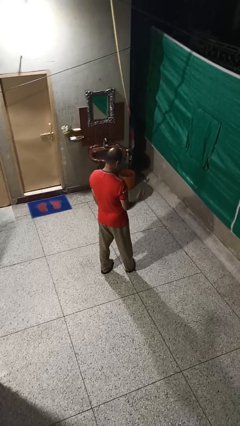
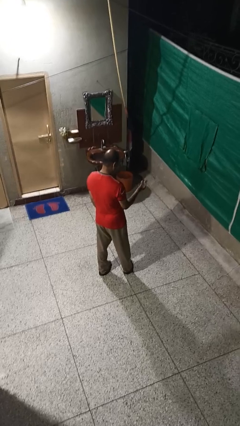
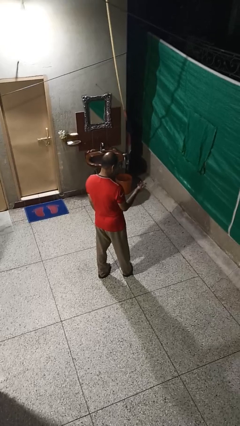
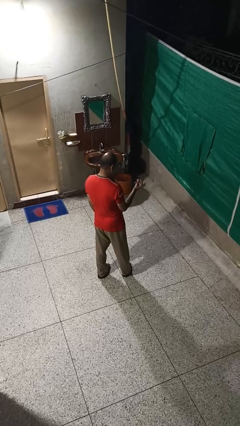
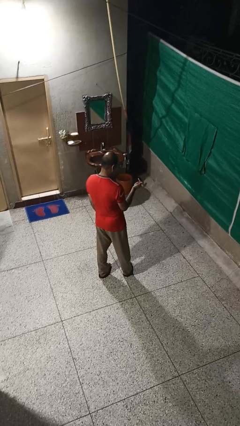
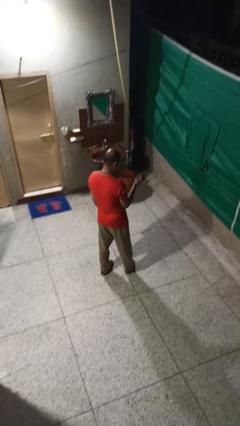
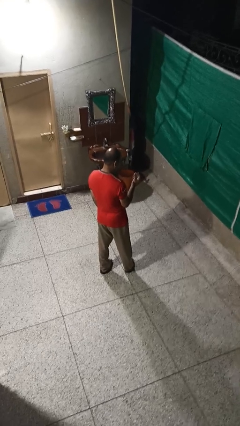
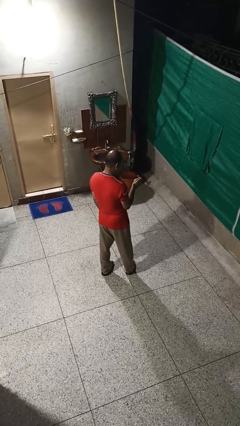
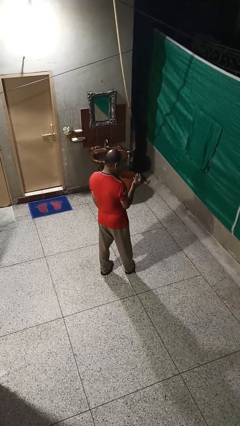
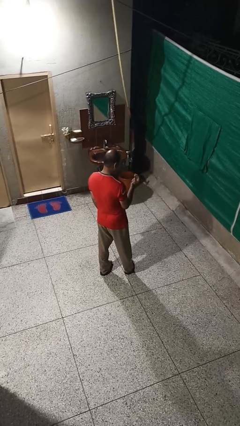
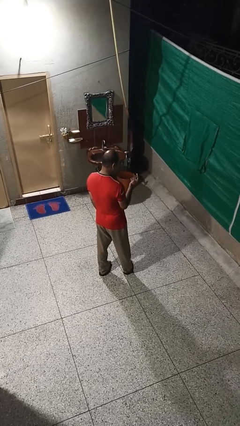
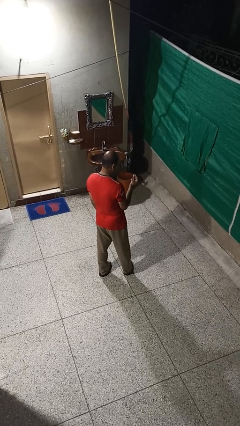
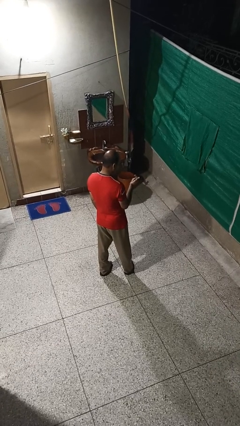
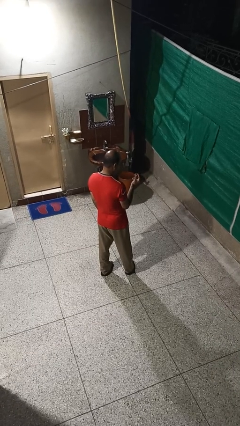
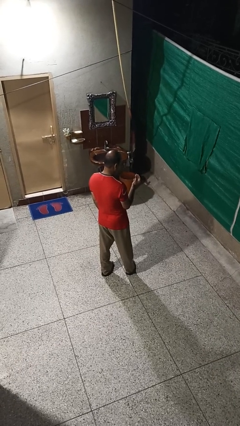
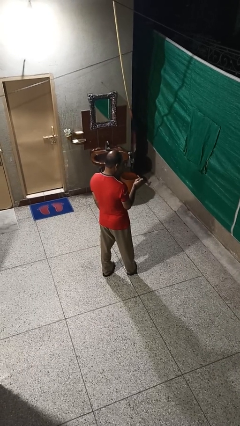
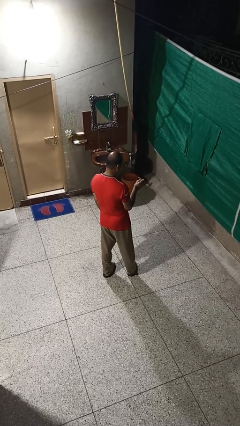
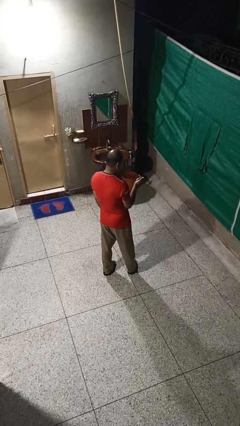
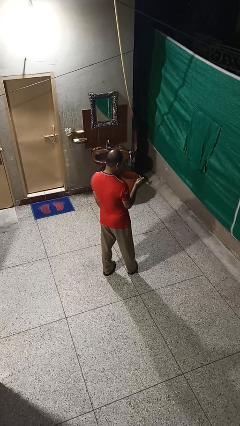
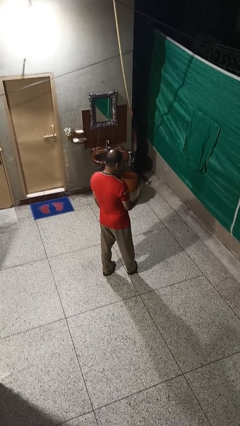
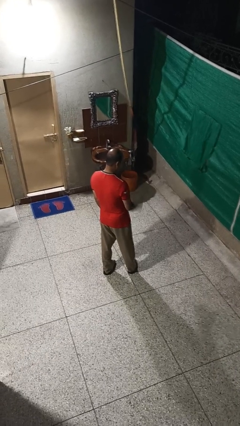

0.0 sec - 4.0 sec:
person snaps fingers

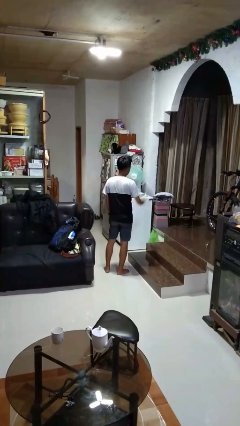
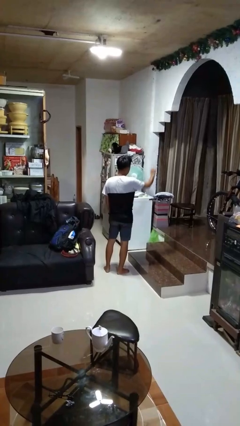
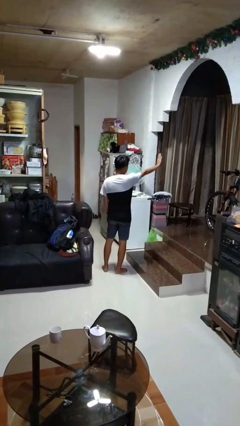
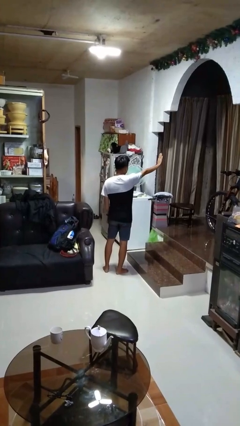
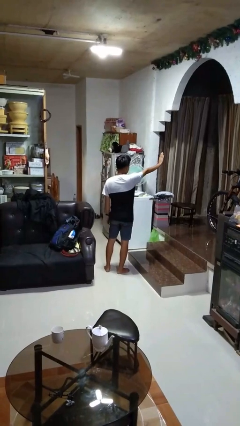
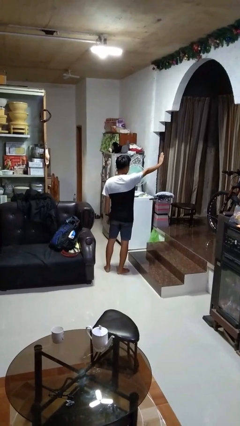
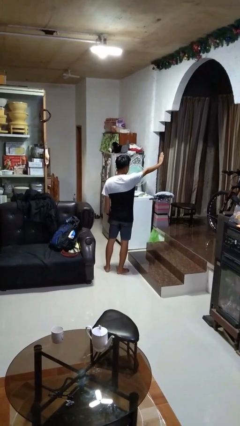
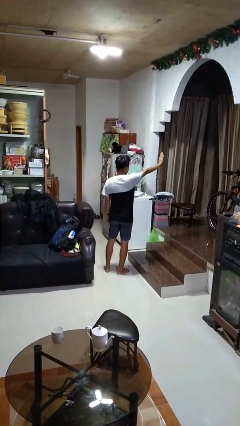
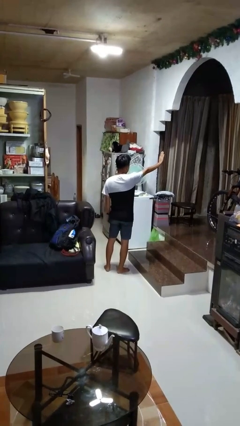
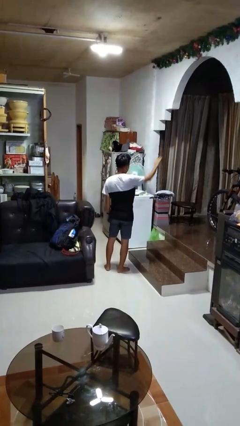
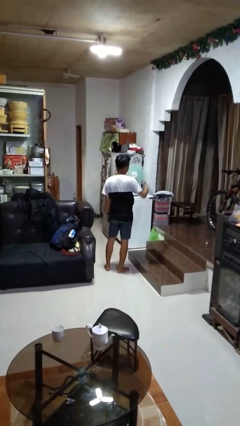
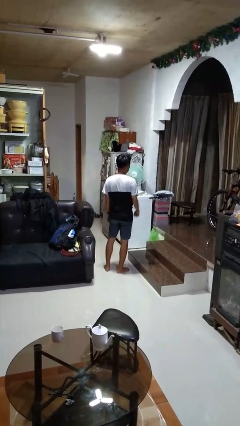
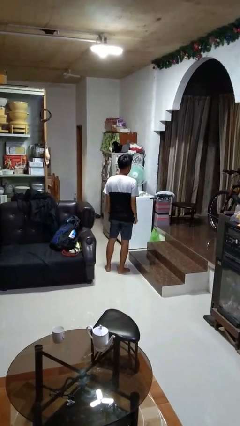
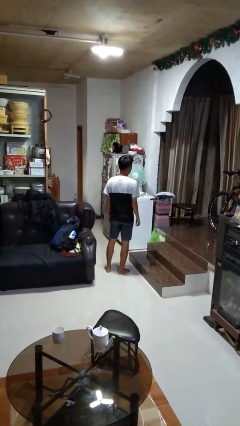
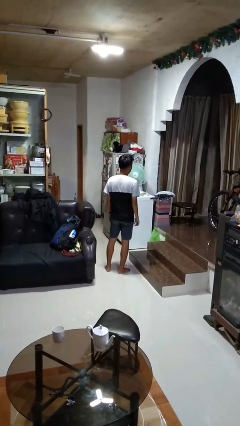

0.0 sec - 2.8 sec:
person gestures stop

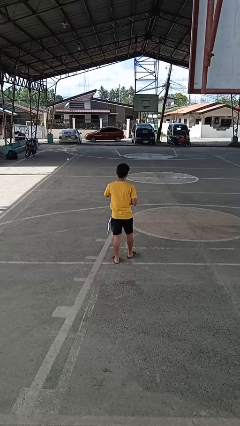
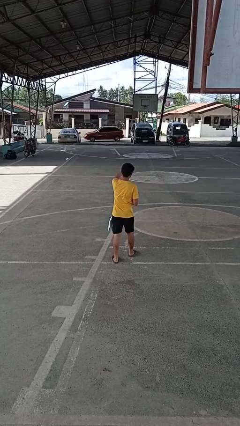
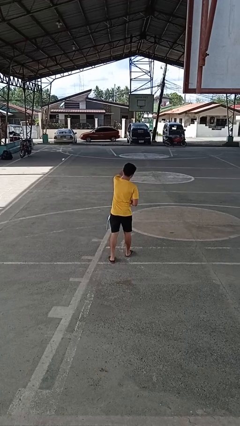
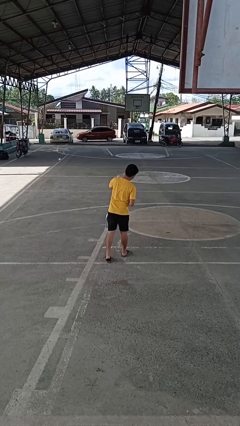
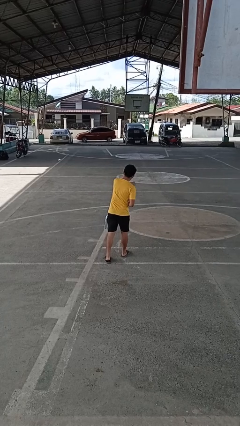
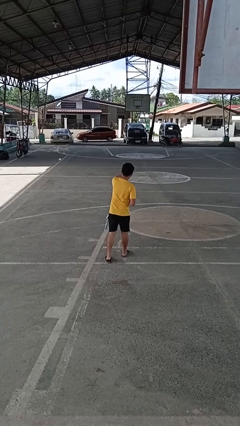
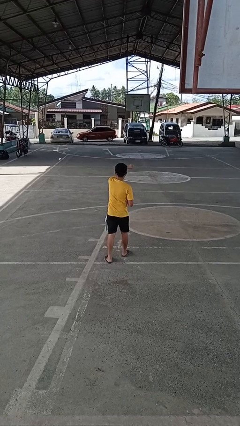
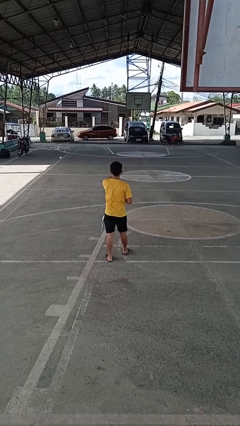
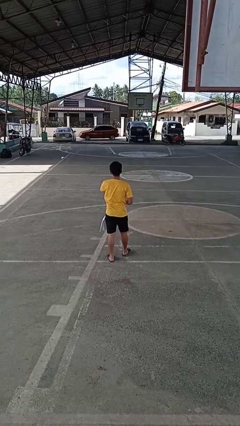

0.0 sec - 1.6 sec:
person punches

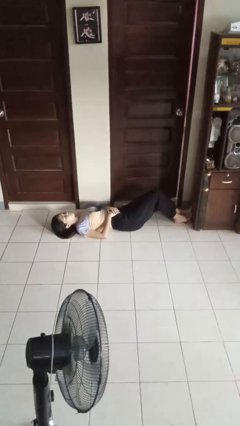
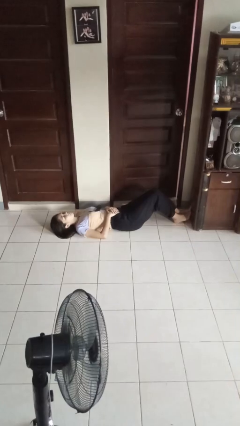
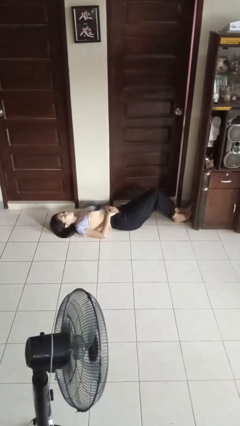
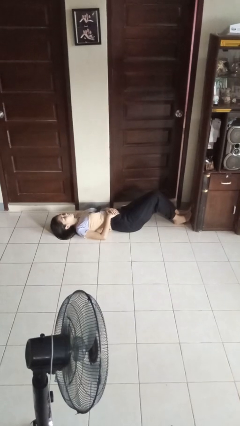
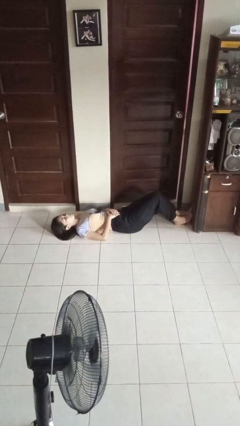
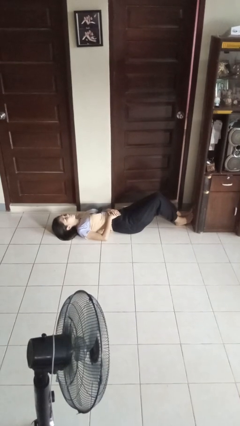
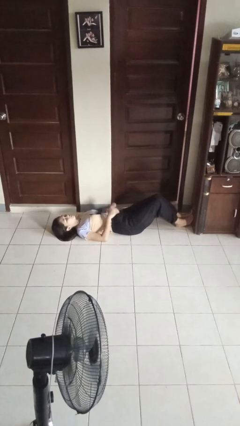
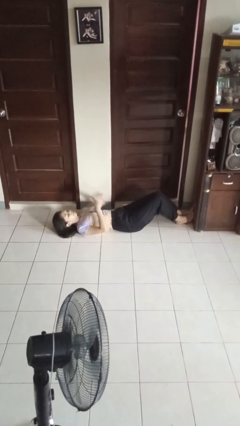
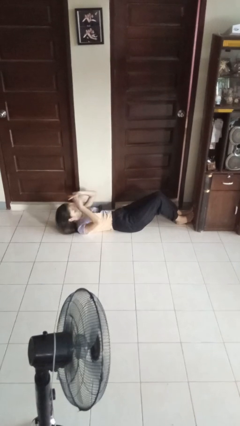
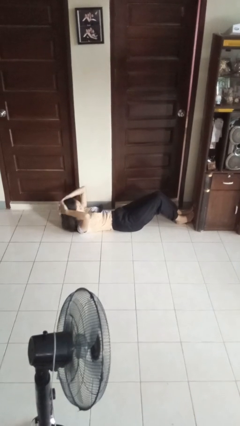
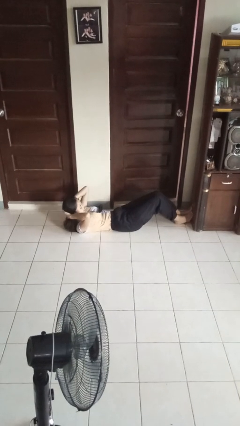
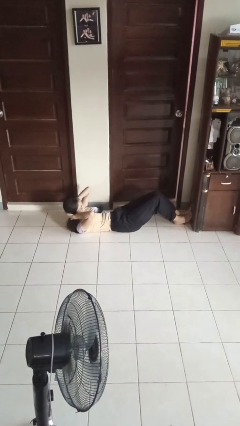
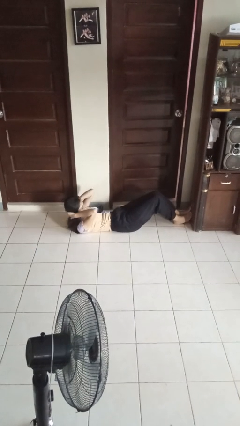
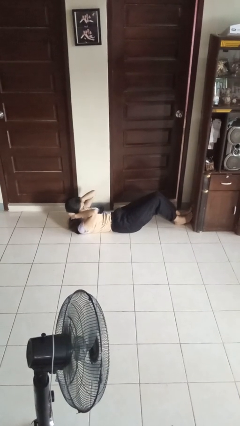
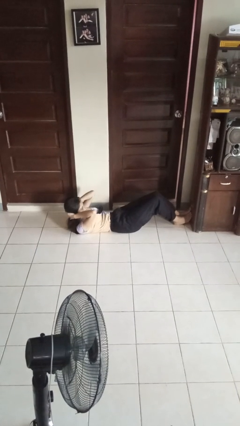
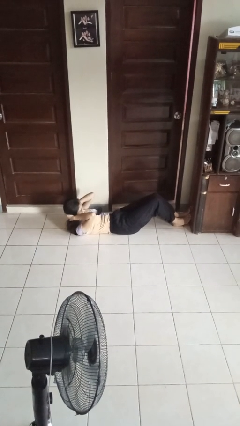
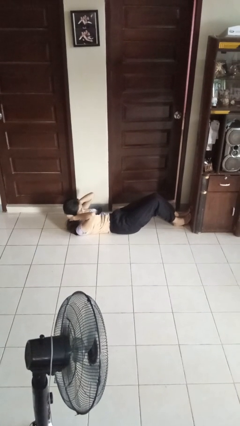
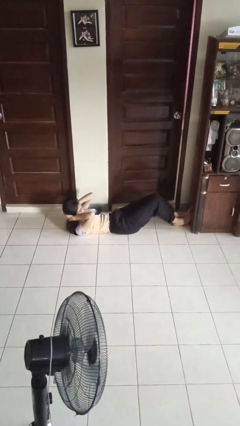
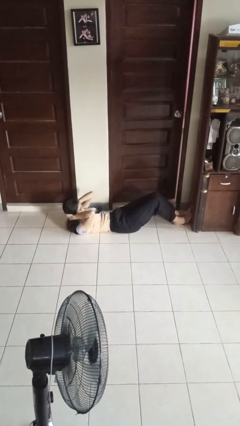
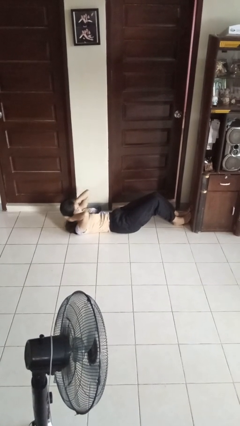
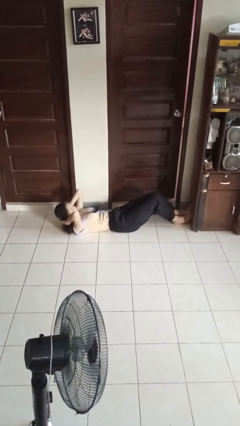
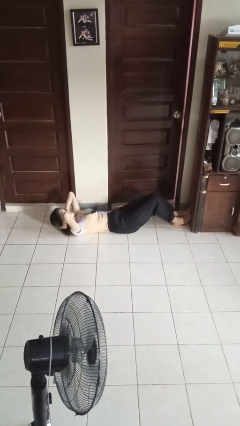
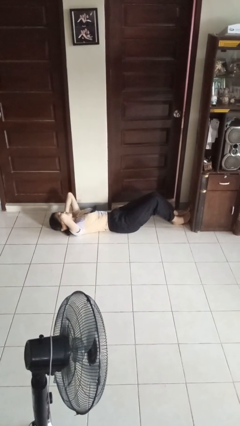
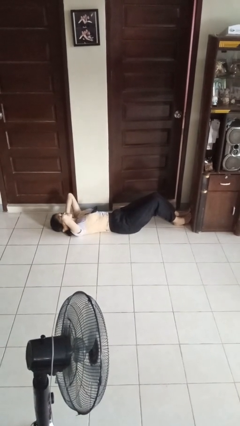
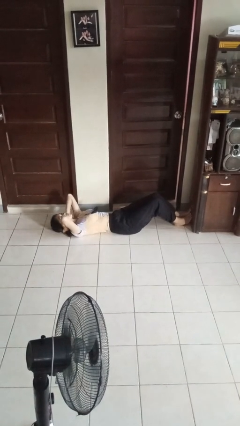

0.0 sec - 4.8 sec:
person exercises with situp

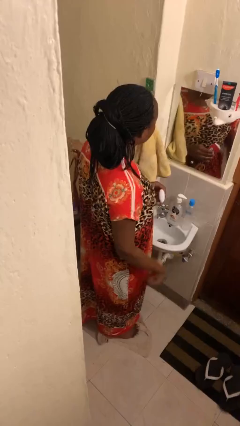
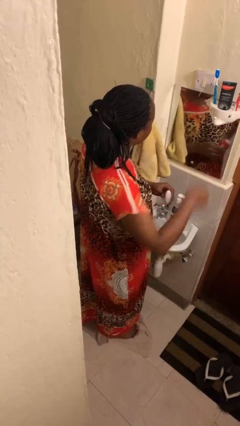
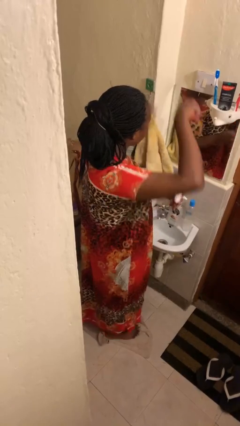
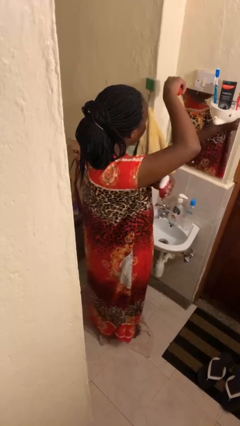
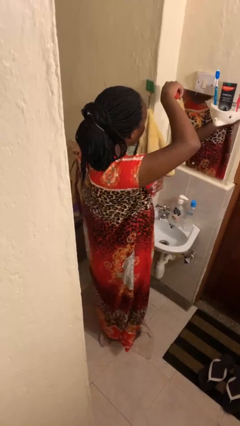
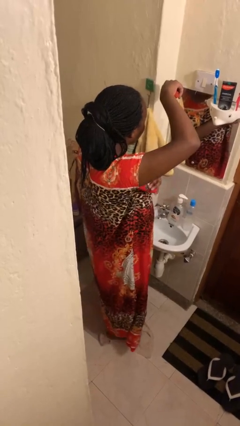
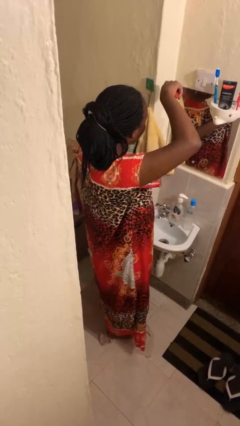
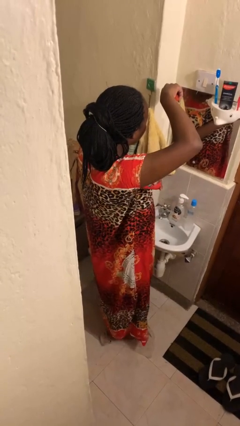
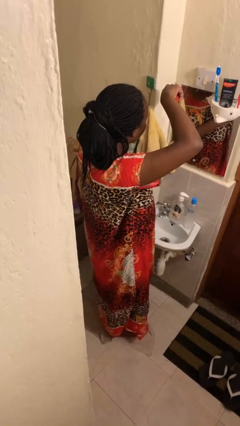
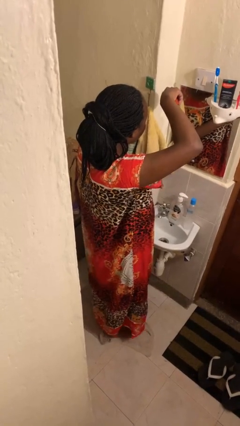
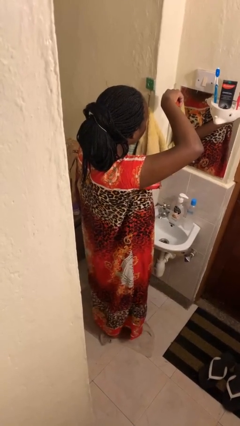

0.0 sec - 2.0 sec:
person applies deodorant

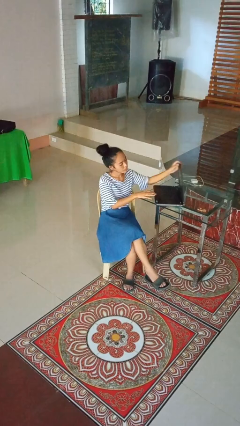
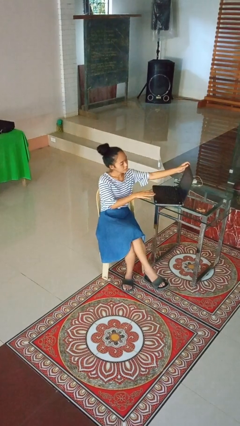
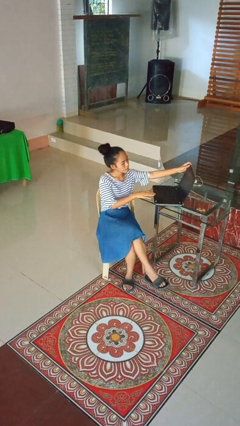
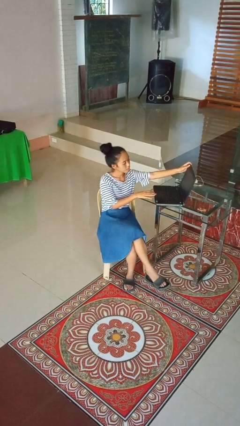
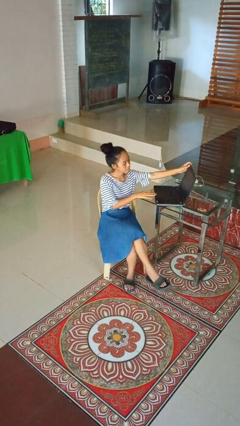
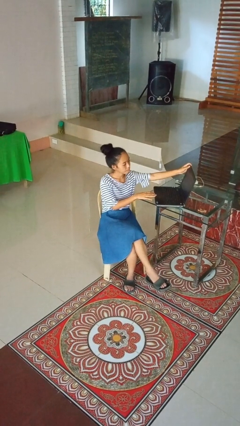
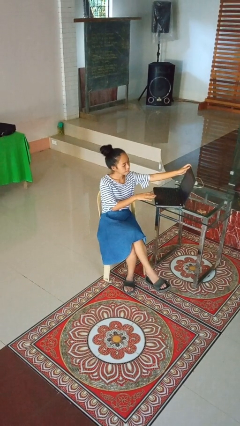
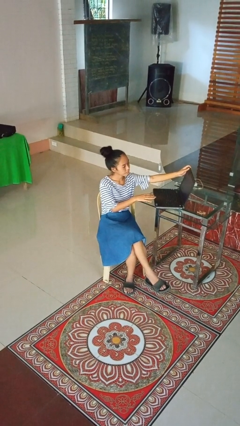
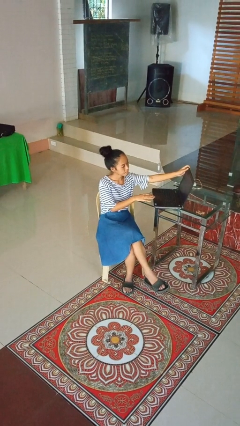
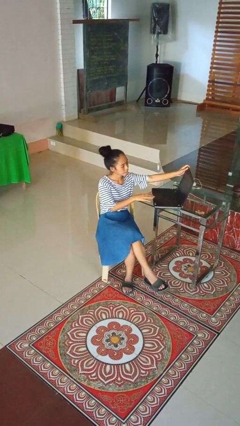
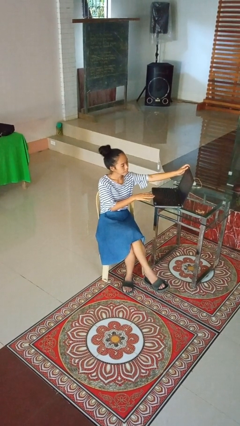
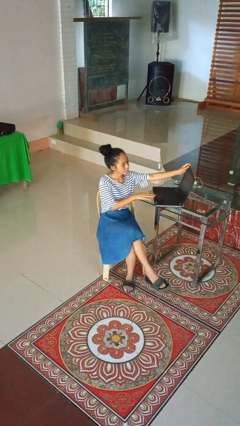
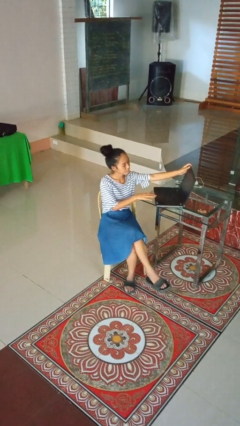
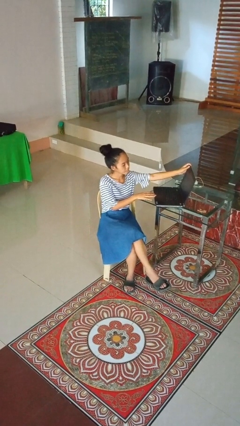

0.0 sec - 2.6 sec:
person opens laptop

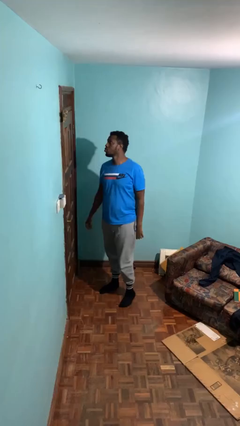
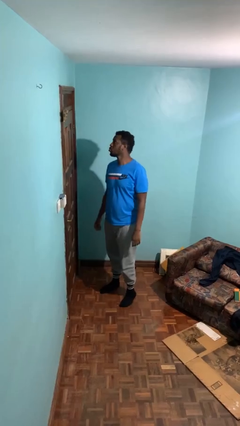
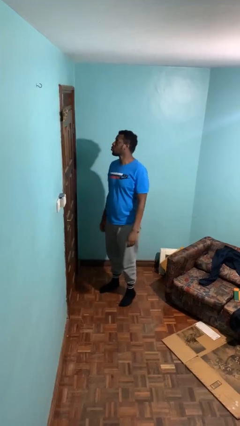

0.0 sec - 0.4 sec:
person scratches face
